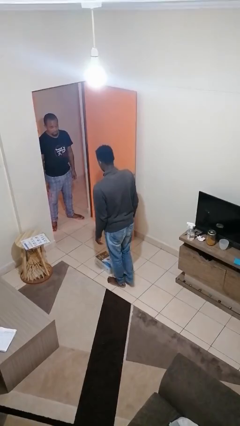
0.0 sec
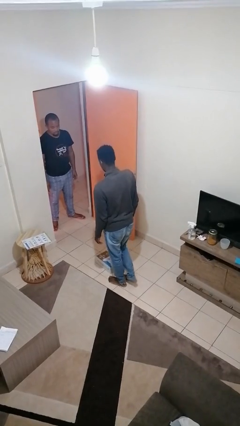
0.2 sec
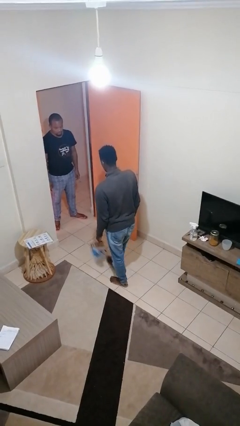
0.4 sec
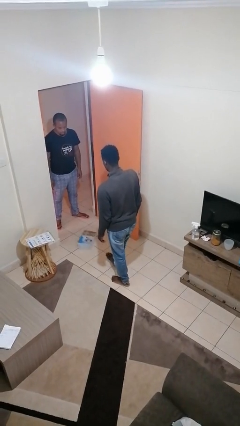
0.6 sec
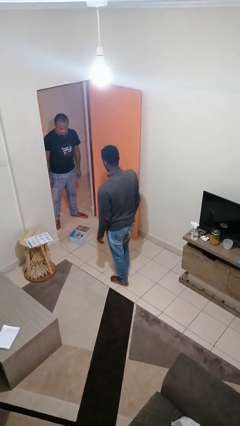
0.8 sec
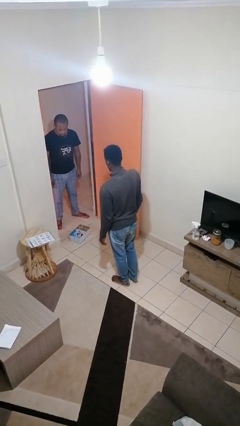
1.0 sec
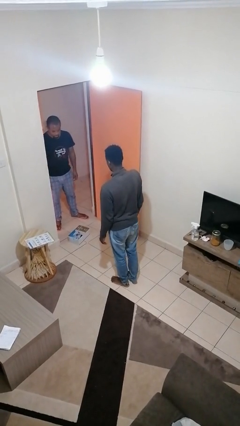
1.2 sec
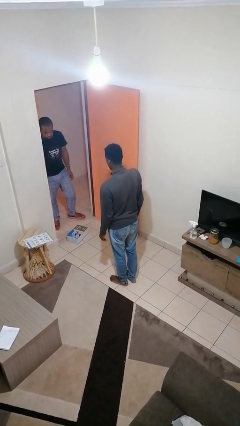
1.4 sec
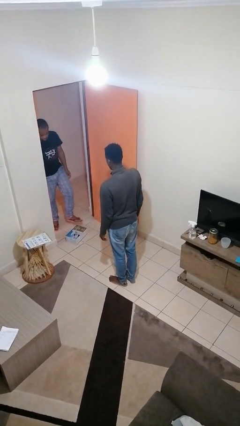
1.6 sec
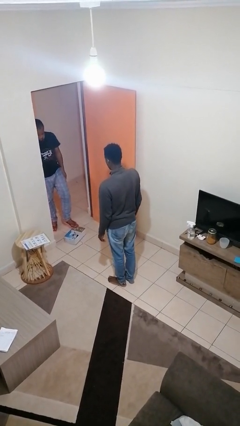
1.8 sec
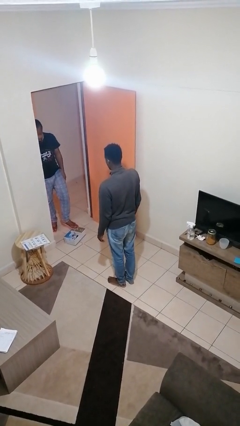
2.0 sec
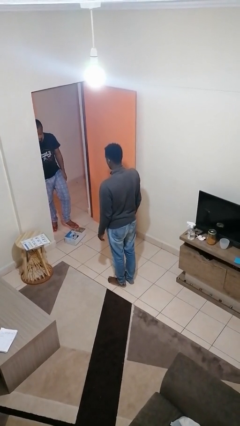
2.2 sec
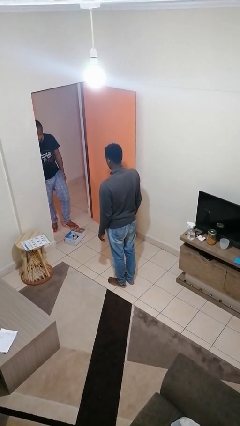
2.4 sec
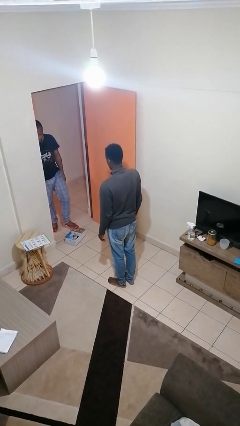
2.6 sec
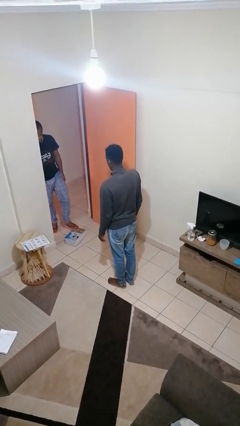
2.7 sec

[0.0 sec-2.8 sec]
person kicks object to person

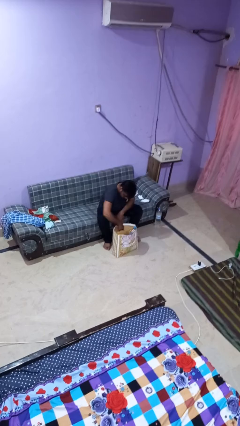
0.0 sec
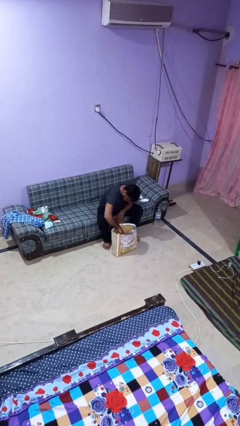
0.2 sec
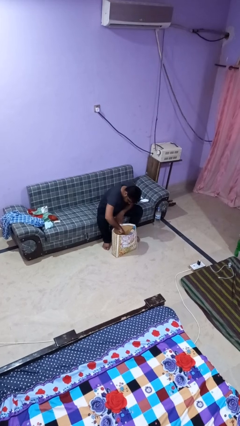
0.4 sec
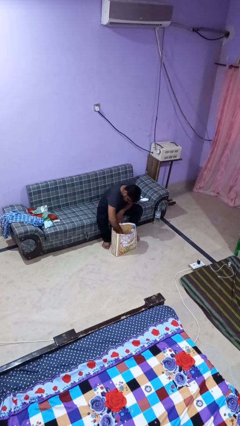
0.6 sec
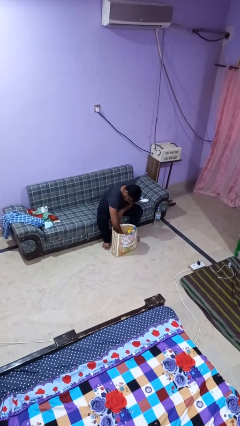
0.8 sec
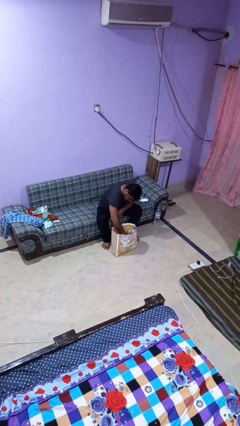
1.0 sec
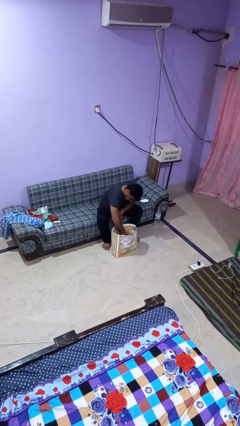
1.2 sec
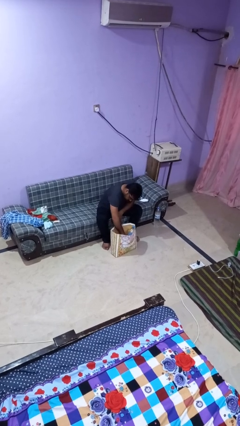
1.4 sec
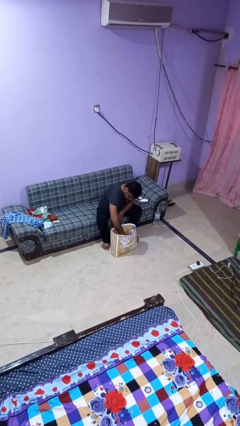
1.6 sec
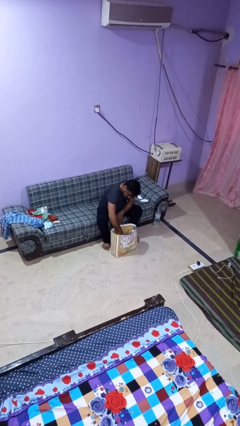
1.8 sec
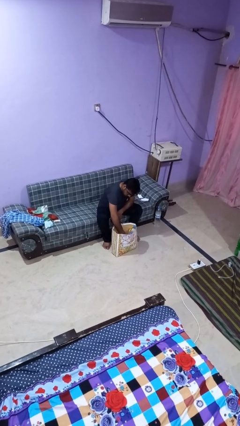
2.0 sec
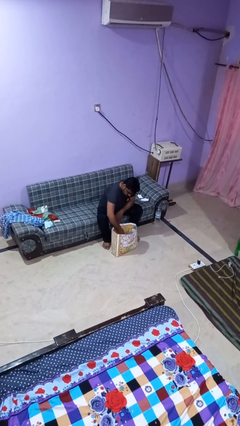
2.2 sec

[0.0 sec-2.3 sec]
person searches in bag

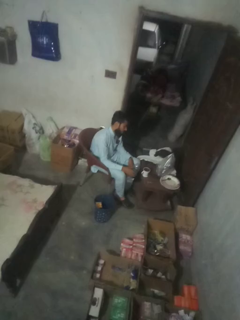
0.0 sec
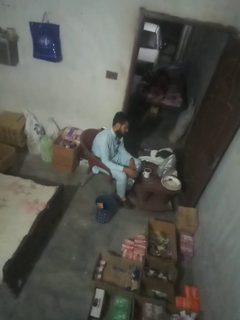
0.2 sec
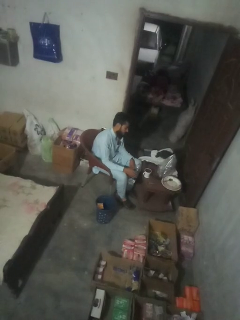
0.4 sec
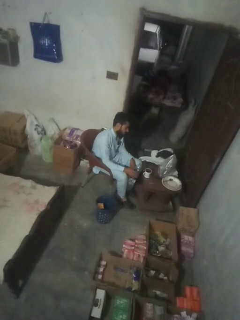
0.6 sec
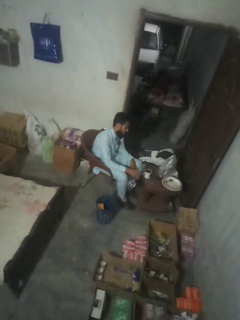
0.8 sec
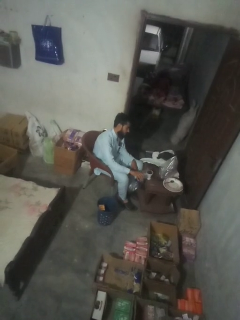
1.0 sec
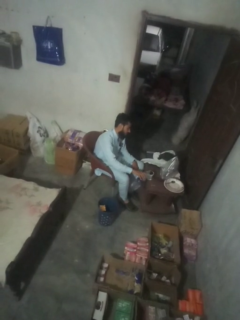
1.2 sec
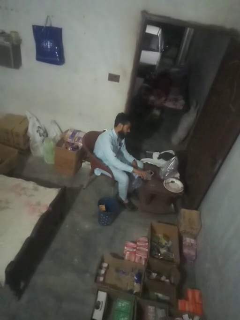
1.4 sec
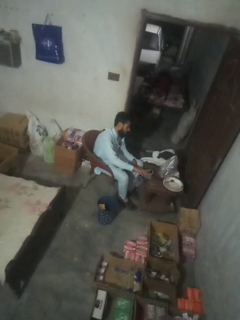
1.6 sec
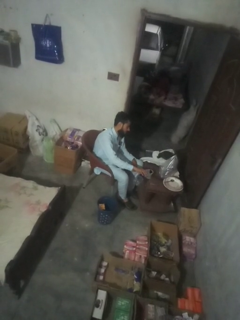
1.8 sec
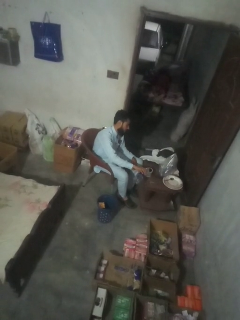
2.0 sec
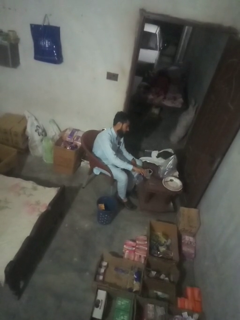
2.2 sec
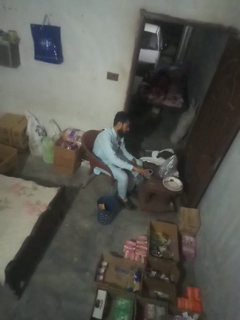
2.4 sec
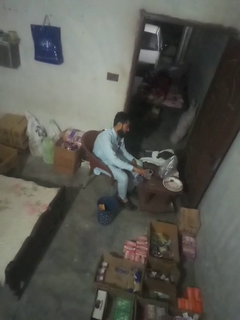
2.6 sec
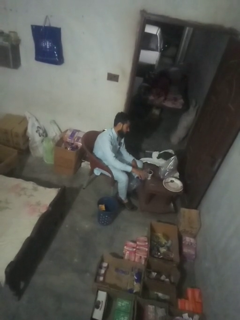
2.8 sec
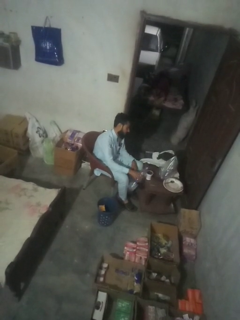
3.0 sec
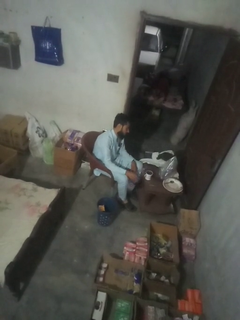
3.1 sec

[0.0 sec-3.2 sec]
person pours liquid into cup

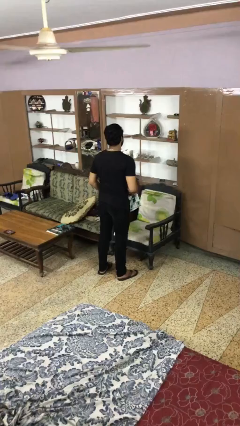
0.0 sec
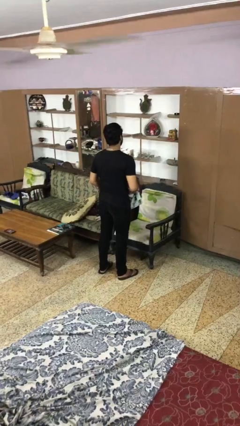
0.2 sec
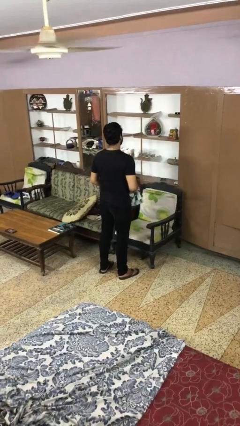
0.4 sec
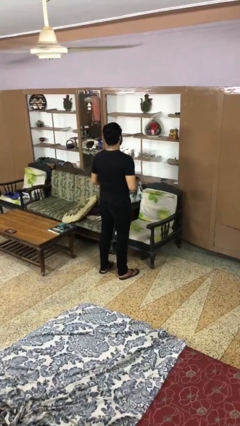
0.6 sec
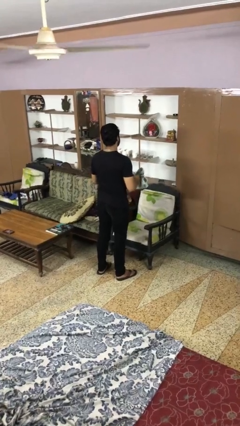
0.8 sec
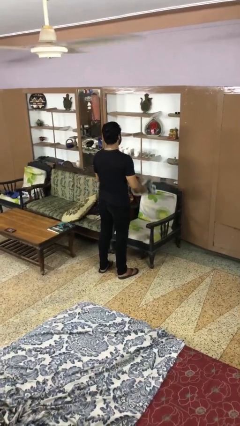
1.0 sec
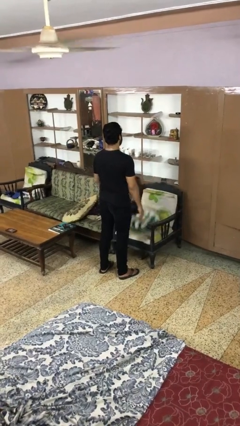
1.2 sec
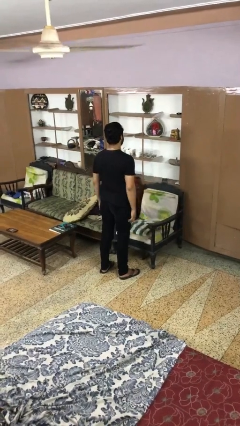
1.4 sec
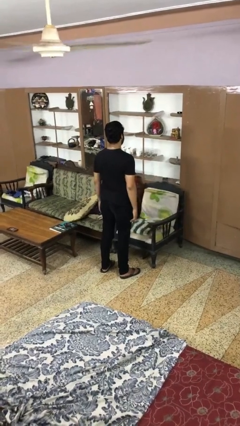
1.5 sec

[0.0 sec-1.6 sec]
person puts down object on couch

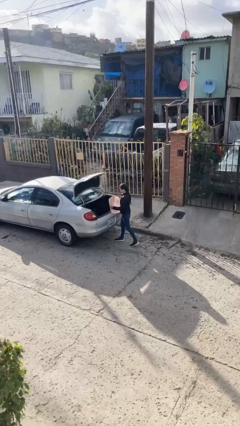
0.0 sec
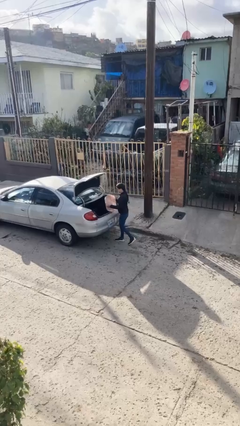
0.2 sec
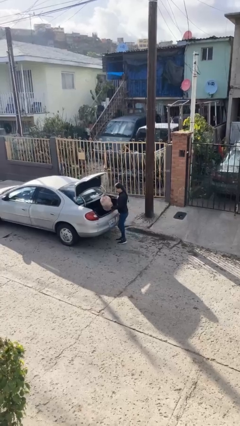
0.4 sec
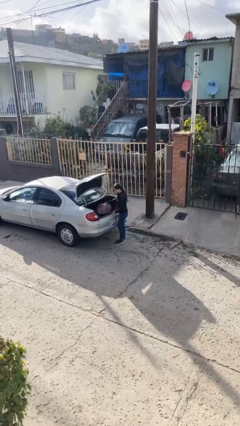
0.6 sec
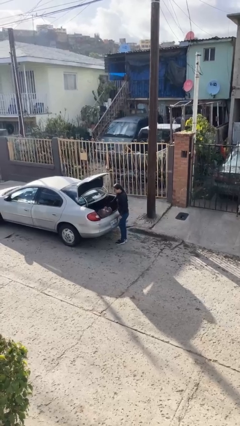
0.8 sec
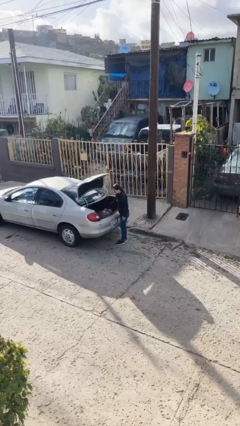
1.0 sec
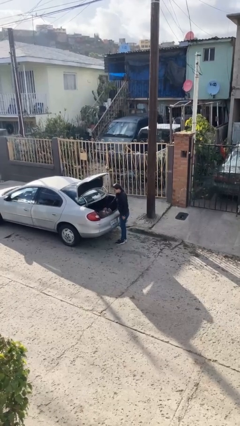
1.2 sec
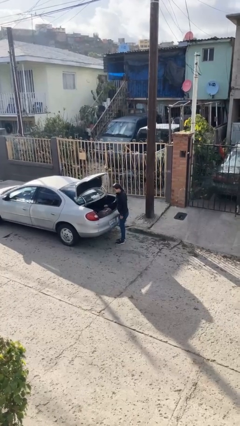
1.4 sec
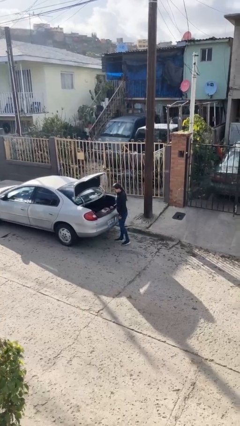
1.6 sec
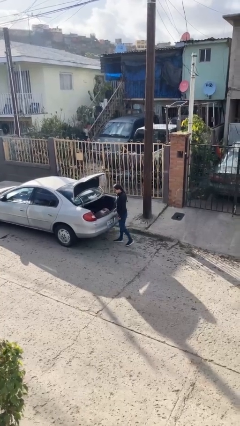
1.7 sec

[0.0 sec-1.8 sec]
person loads car

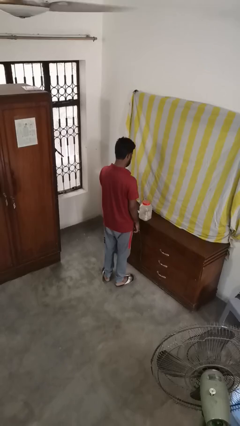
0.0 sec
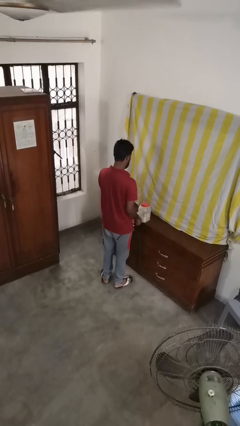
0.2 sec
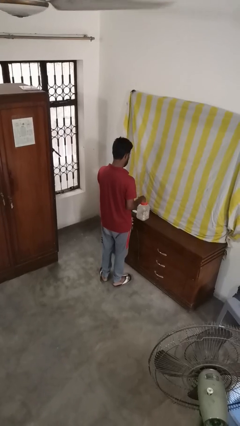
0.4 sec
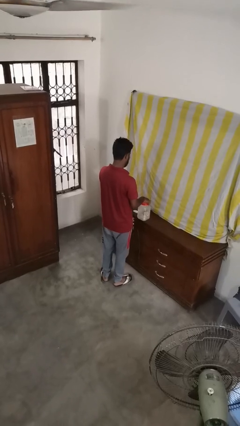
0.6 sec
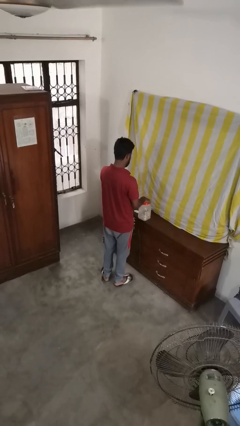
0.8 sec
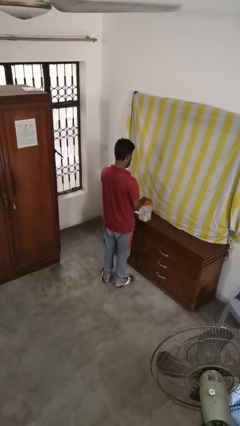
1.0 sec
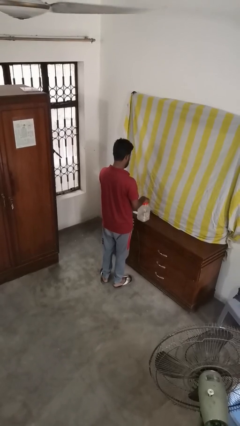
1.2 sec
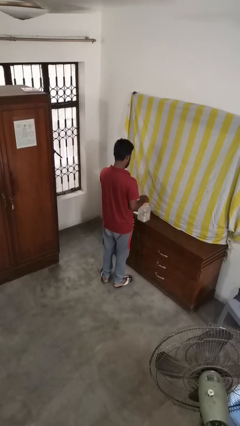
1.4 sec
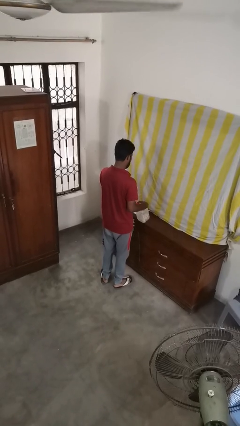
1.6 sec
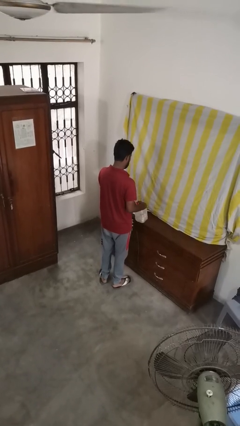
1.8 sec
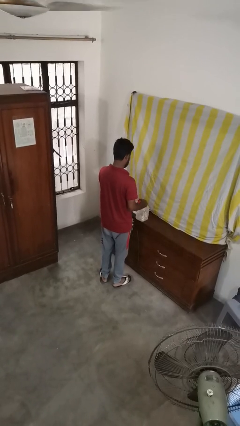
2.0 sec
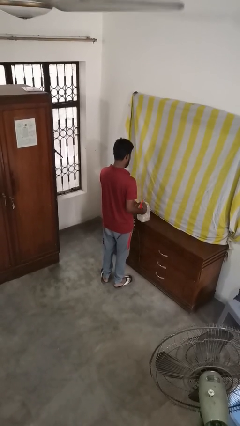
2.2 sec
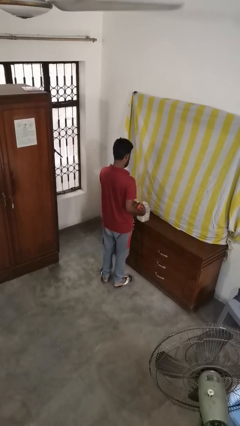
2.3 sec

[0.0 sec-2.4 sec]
person opens jar

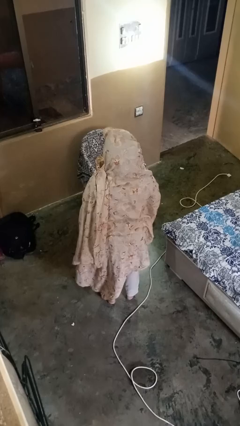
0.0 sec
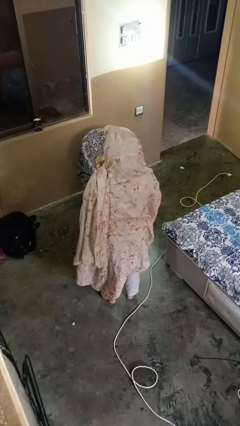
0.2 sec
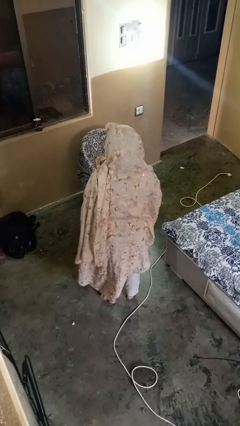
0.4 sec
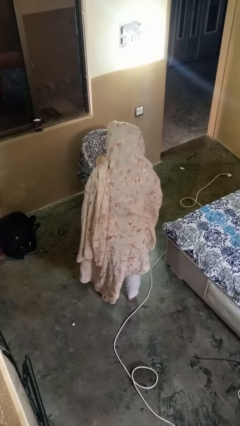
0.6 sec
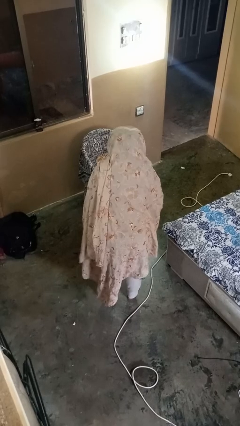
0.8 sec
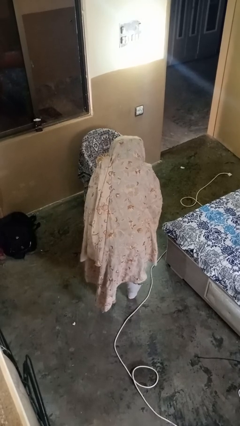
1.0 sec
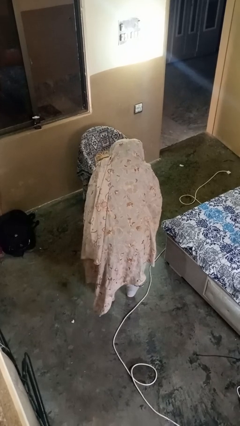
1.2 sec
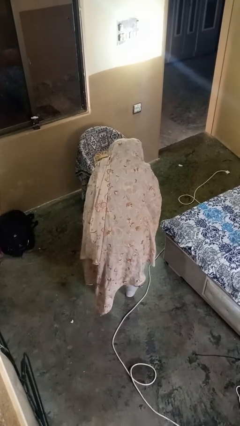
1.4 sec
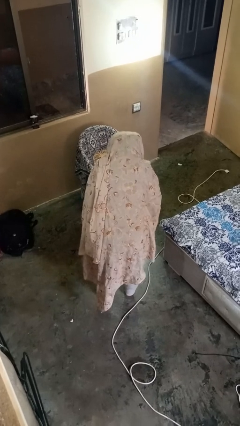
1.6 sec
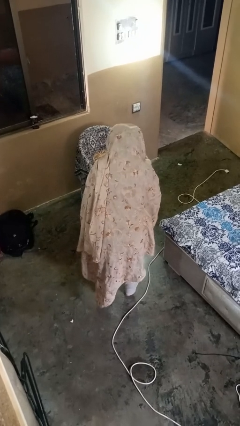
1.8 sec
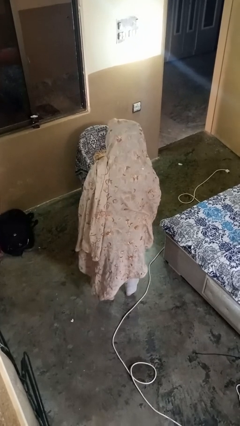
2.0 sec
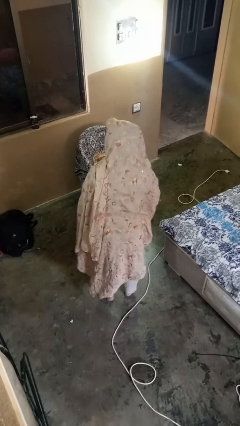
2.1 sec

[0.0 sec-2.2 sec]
person bows

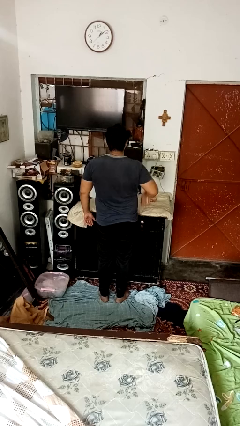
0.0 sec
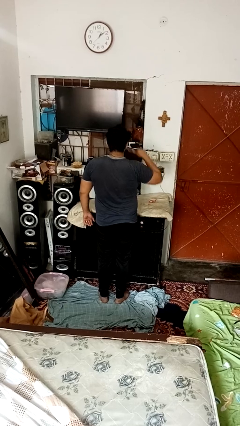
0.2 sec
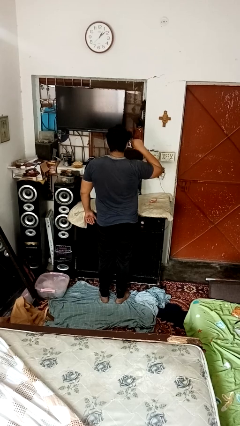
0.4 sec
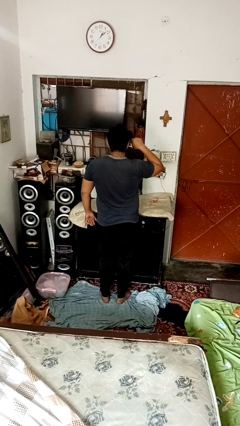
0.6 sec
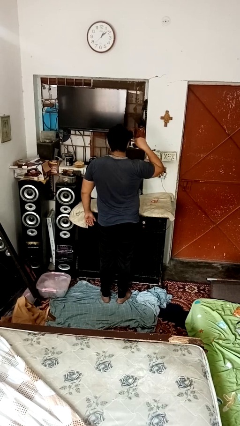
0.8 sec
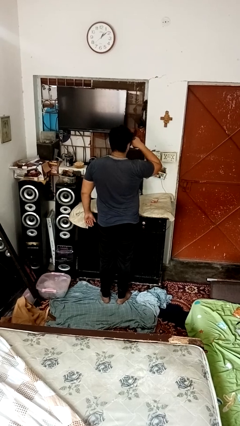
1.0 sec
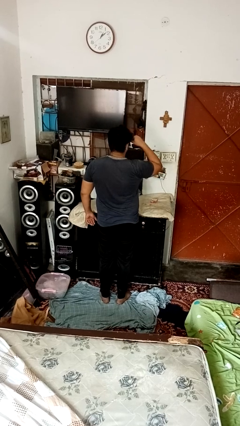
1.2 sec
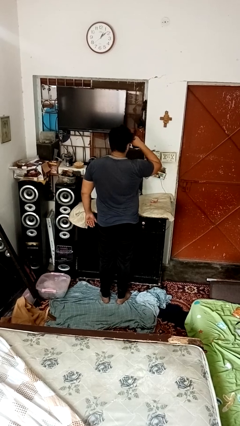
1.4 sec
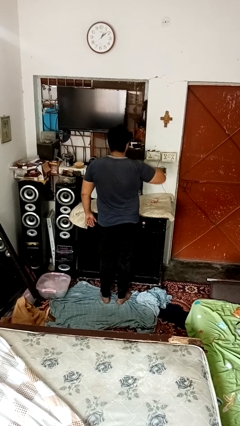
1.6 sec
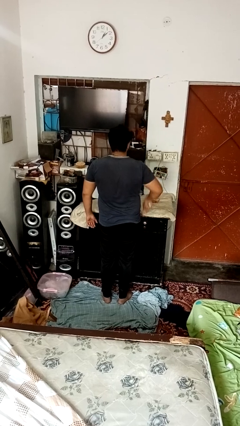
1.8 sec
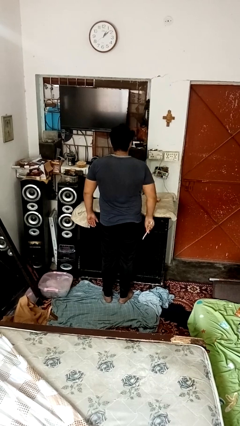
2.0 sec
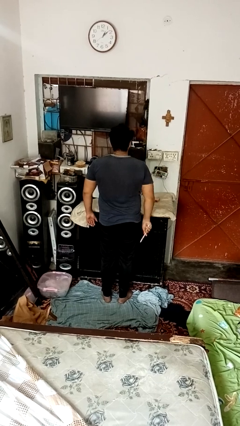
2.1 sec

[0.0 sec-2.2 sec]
person applies eye makeup
